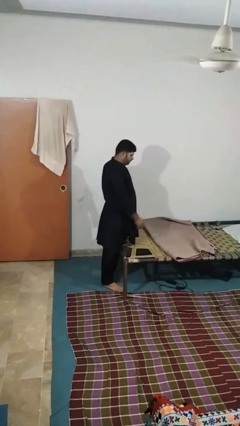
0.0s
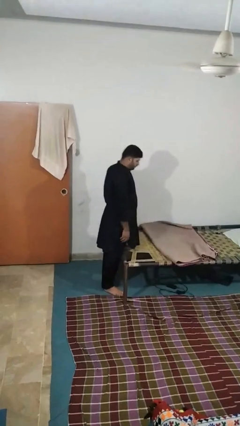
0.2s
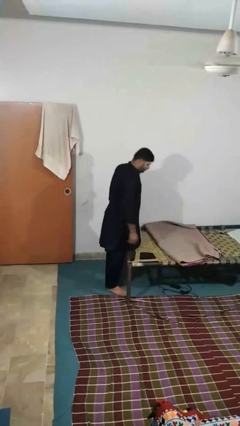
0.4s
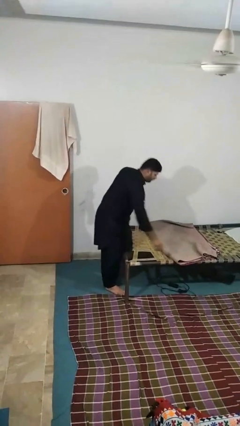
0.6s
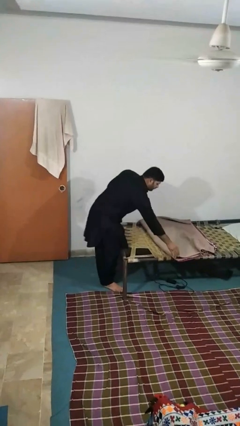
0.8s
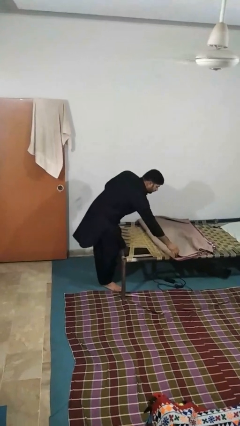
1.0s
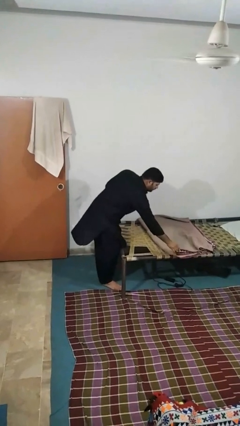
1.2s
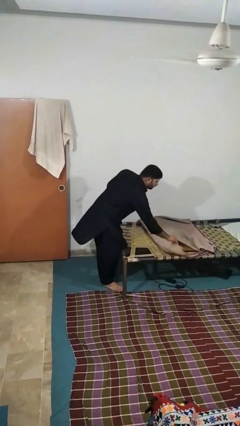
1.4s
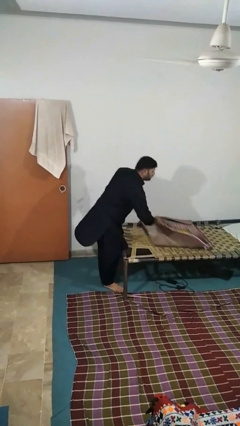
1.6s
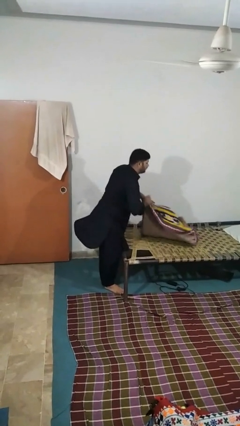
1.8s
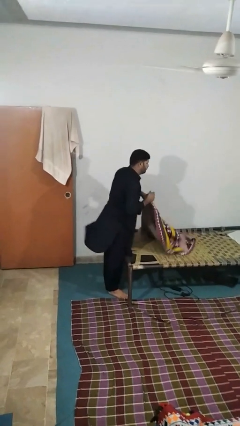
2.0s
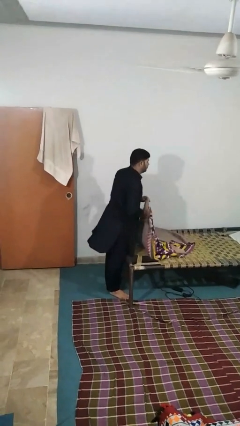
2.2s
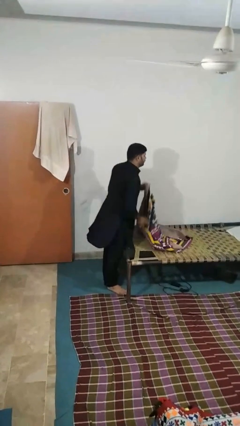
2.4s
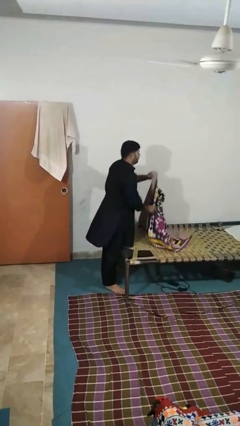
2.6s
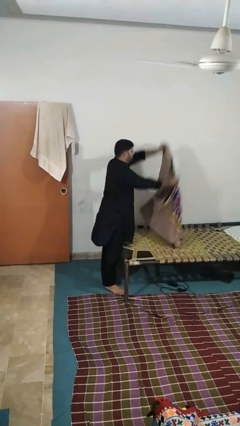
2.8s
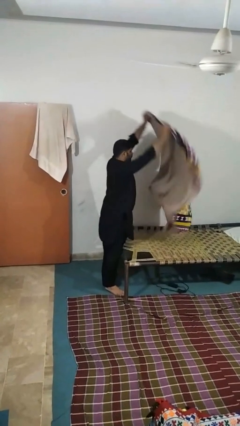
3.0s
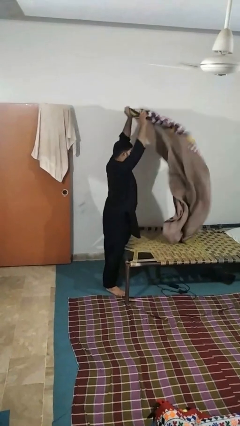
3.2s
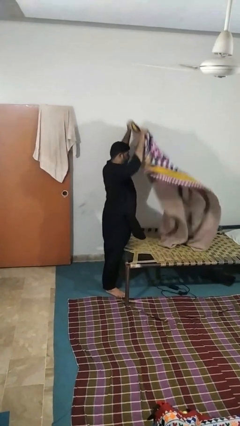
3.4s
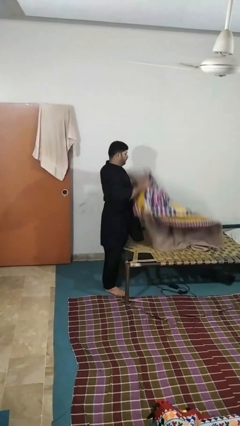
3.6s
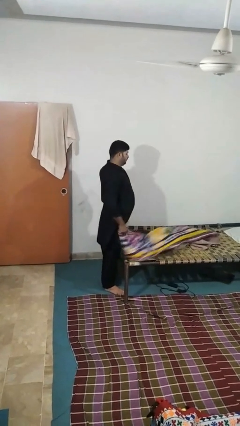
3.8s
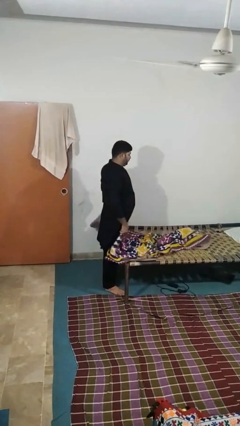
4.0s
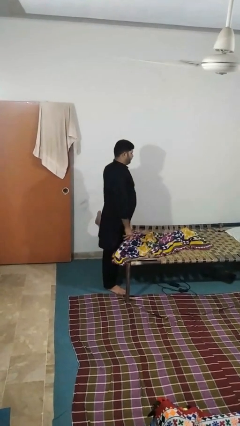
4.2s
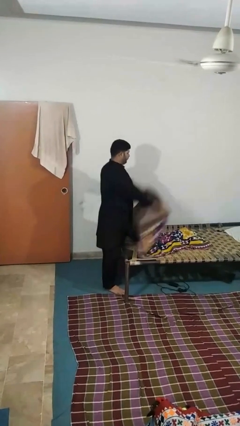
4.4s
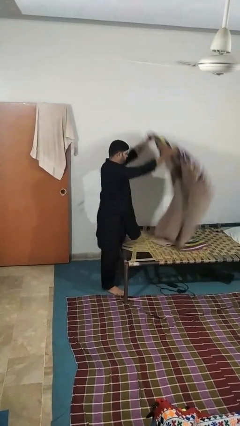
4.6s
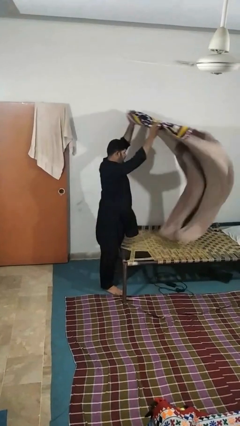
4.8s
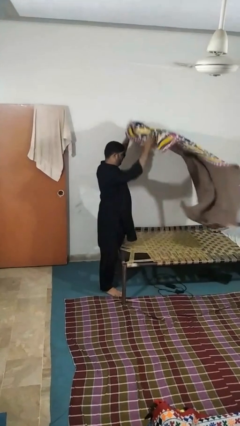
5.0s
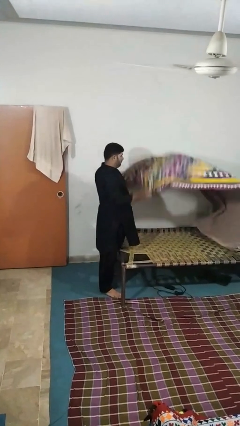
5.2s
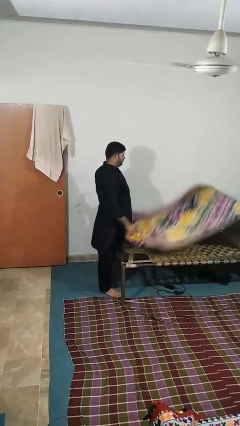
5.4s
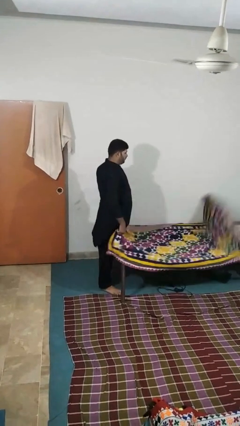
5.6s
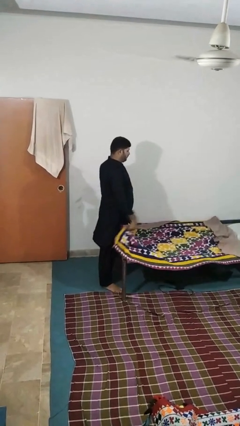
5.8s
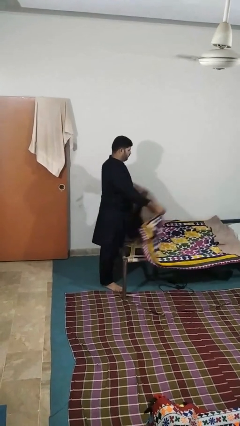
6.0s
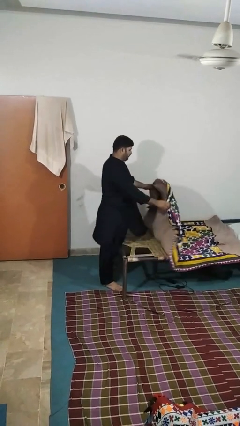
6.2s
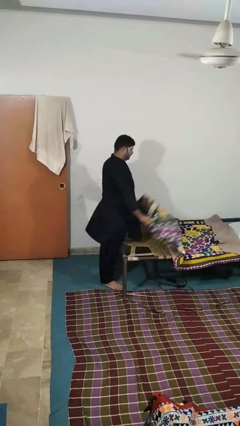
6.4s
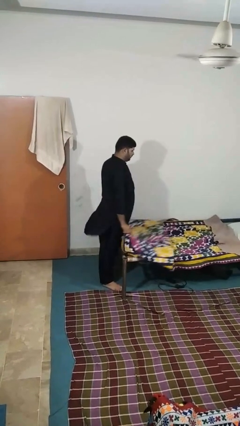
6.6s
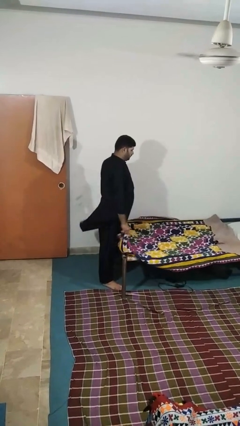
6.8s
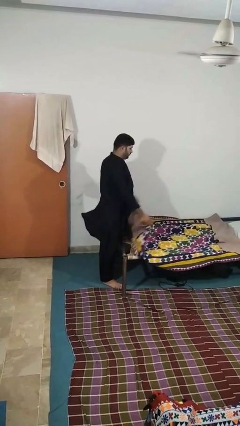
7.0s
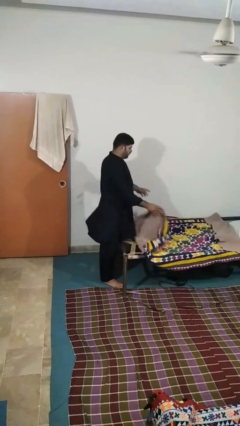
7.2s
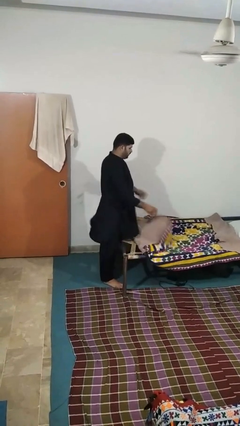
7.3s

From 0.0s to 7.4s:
person unfolds blanket

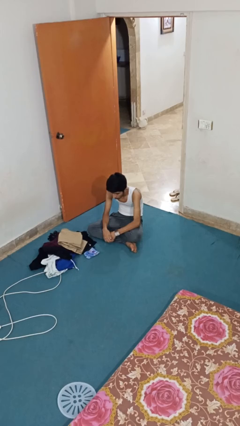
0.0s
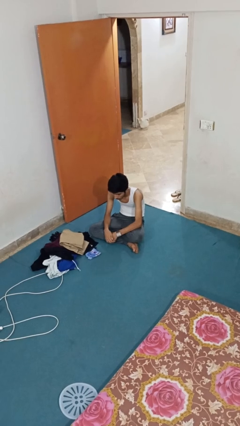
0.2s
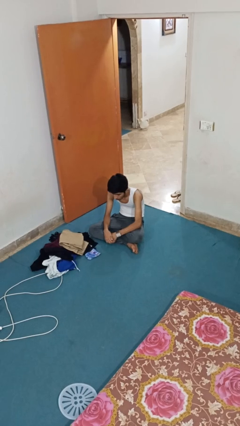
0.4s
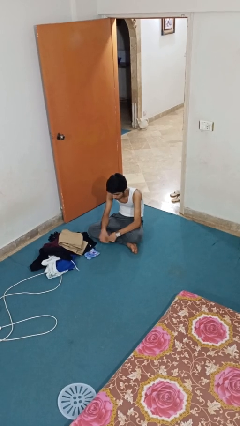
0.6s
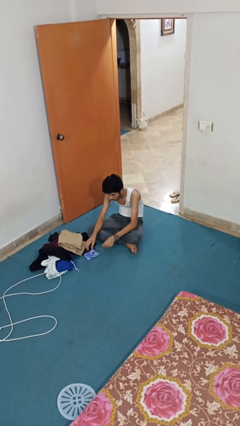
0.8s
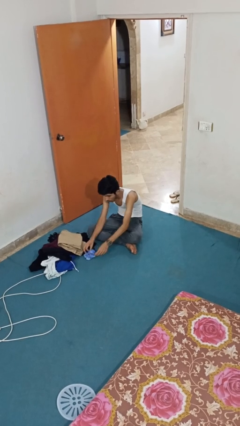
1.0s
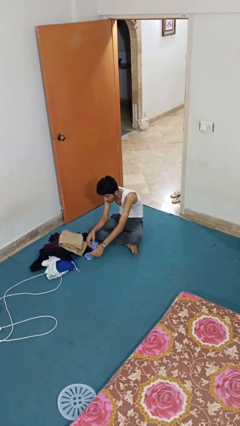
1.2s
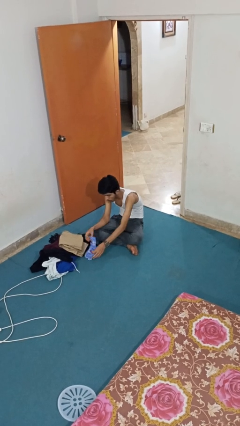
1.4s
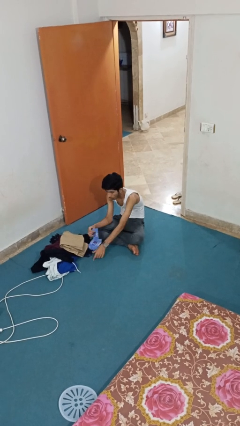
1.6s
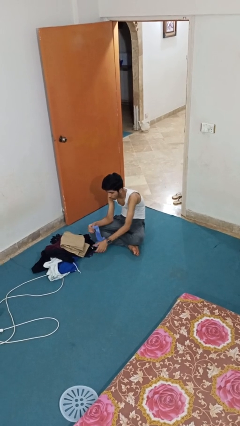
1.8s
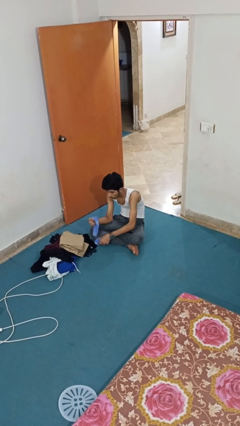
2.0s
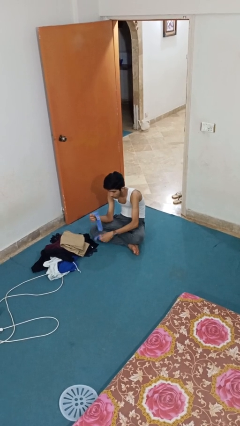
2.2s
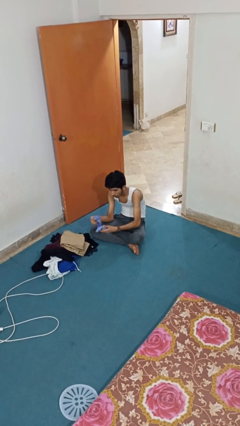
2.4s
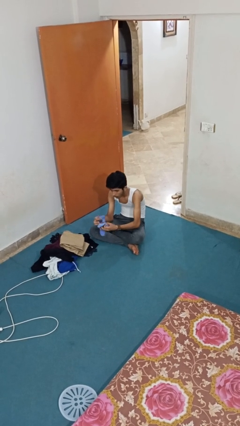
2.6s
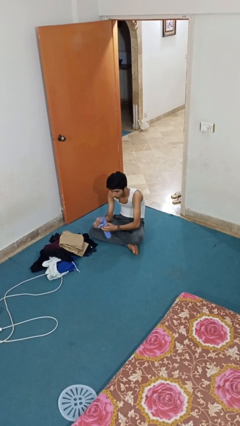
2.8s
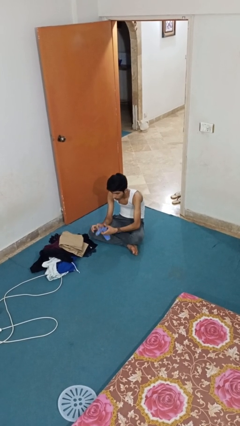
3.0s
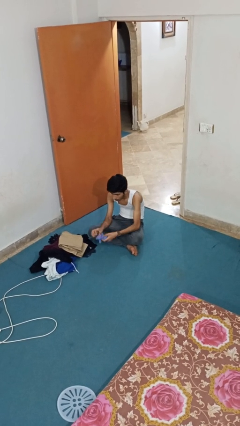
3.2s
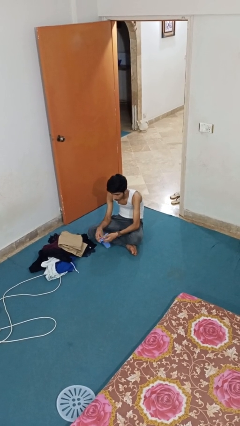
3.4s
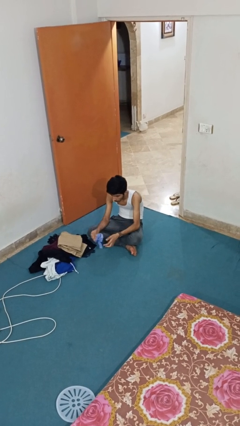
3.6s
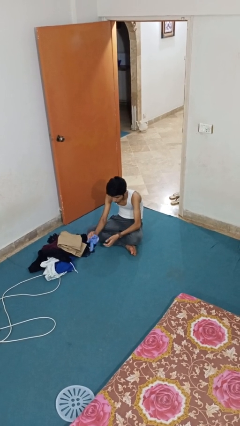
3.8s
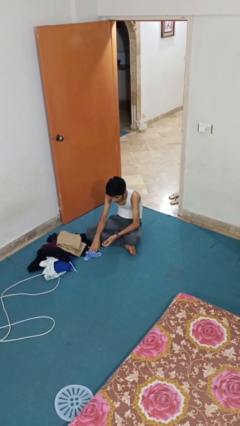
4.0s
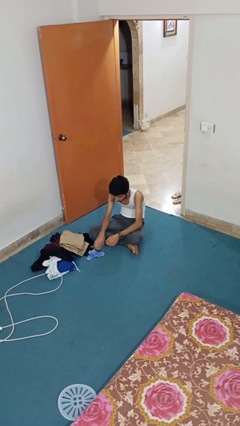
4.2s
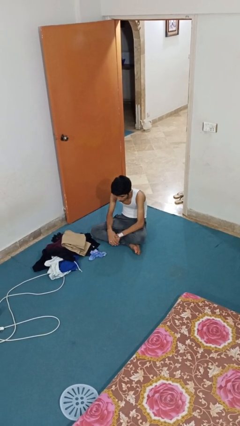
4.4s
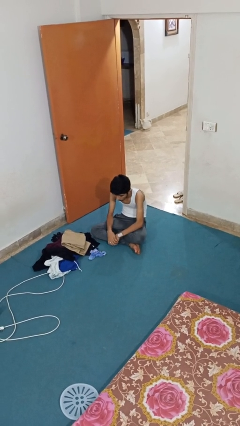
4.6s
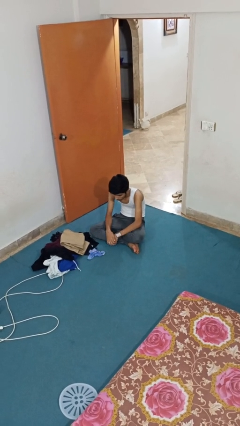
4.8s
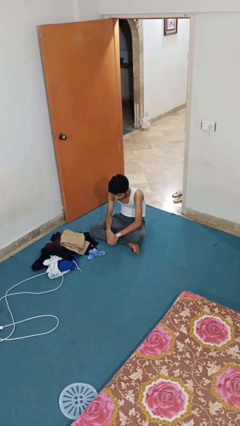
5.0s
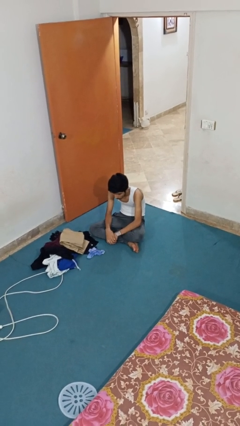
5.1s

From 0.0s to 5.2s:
person folds socks

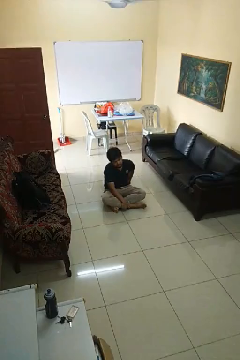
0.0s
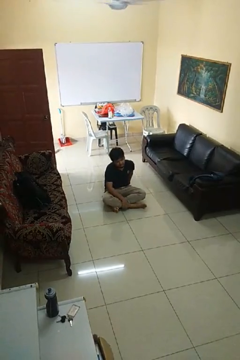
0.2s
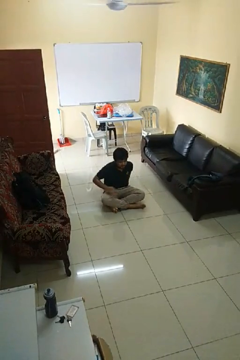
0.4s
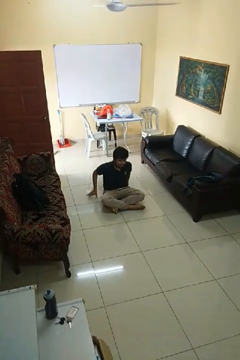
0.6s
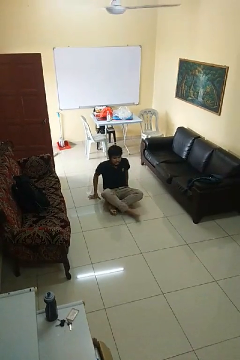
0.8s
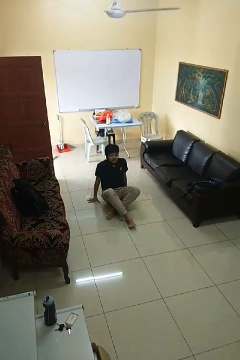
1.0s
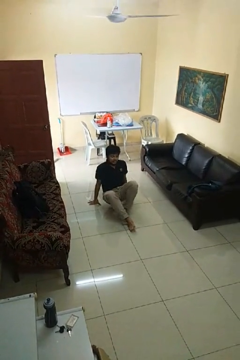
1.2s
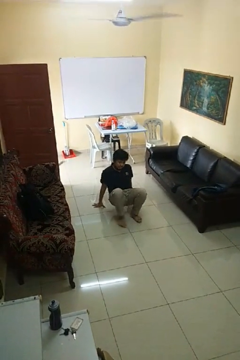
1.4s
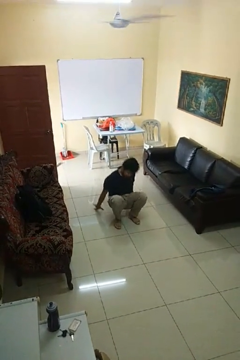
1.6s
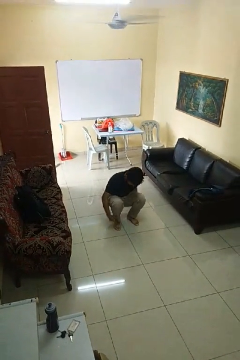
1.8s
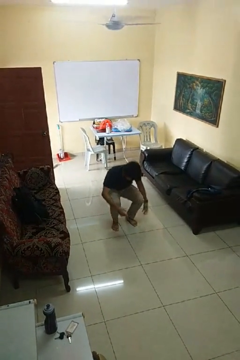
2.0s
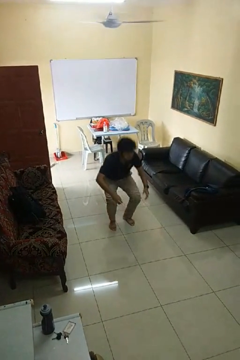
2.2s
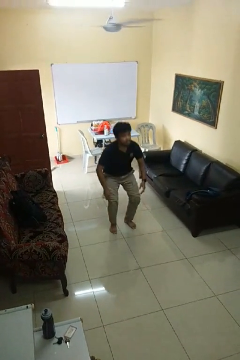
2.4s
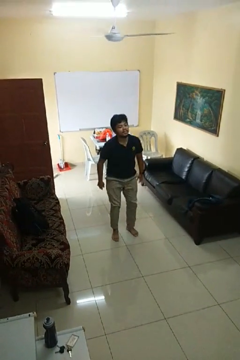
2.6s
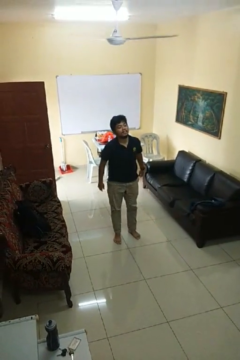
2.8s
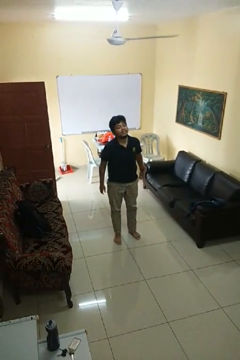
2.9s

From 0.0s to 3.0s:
person stands up from floor

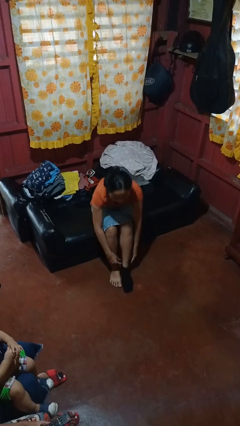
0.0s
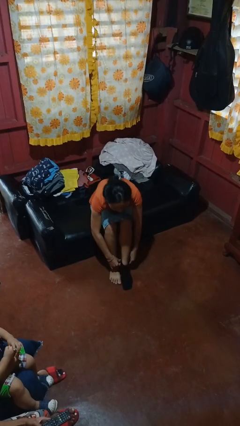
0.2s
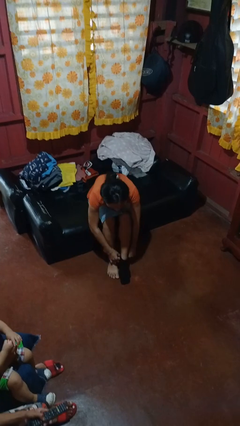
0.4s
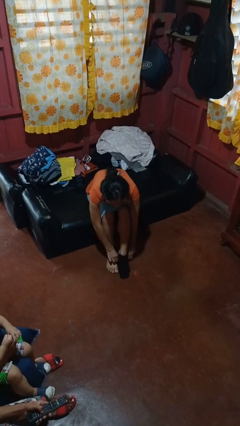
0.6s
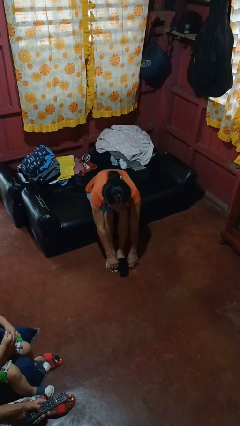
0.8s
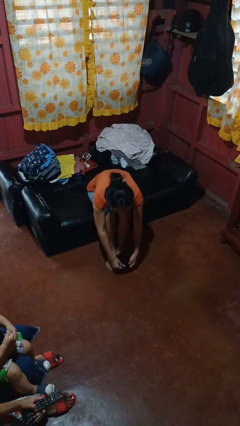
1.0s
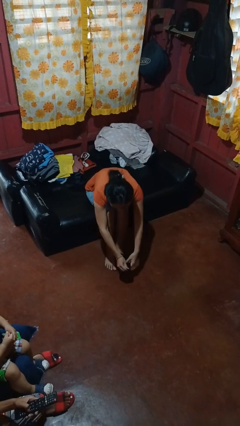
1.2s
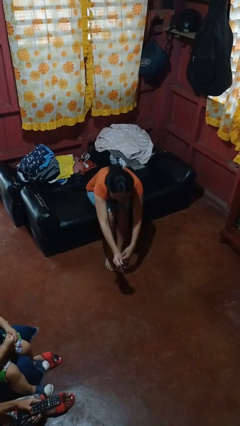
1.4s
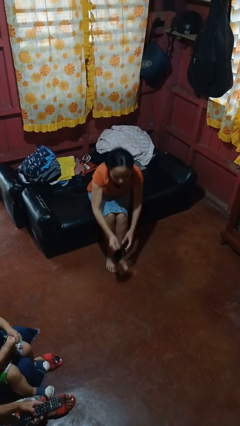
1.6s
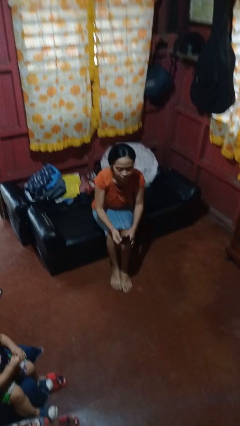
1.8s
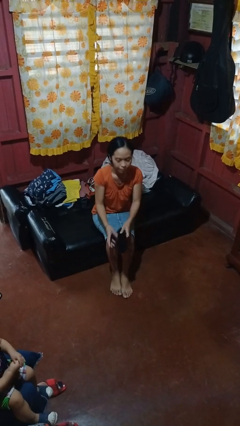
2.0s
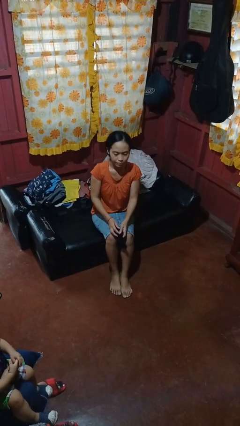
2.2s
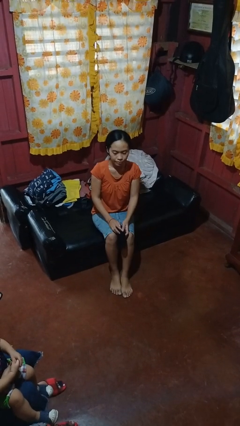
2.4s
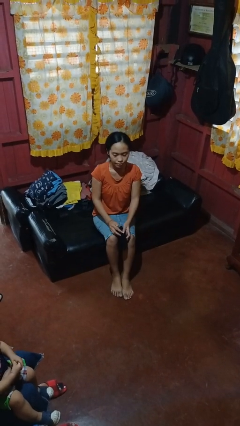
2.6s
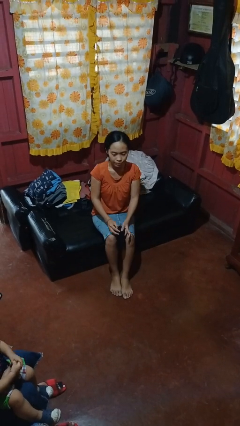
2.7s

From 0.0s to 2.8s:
person takes off socks

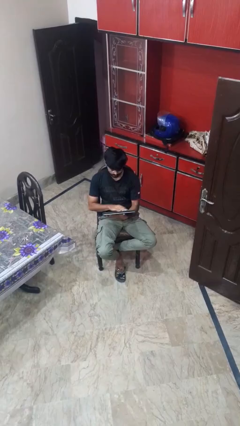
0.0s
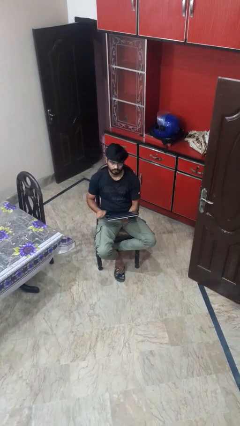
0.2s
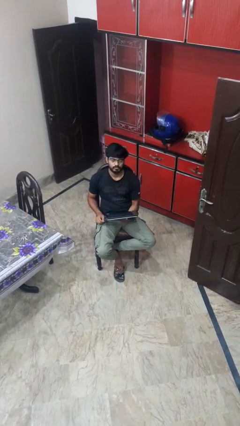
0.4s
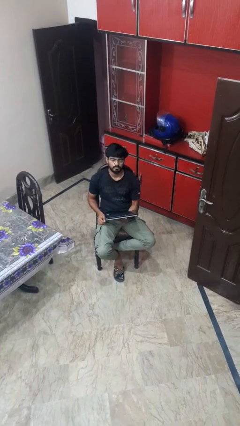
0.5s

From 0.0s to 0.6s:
person interacts with tablet
